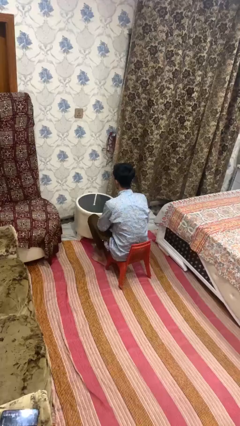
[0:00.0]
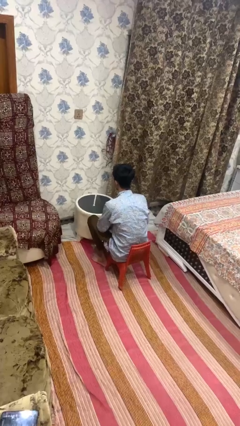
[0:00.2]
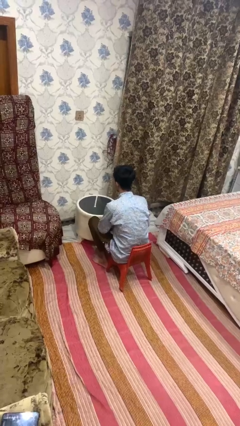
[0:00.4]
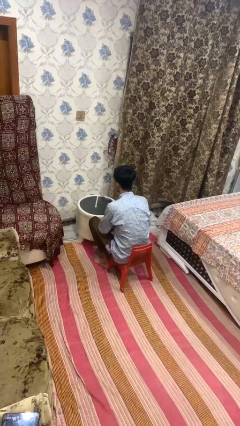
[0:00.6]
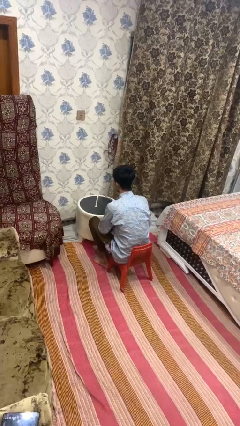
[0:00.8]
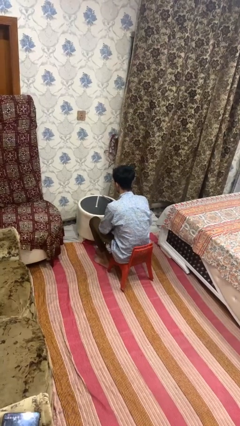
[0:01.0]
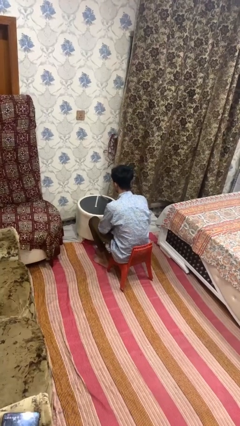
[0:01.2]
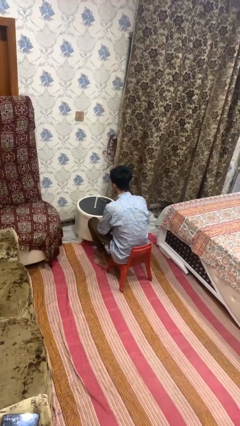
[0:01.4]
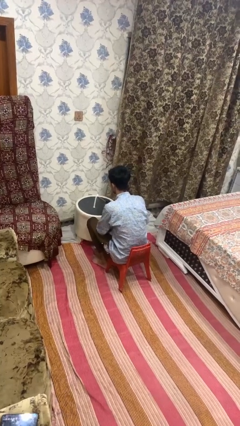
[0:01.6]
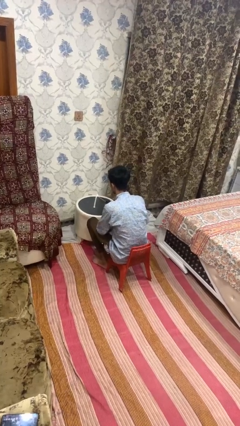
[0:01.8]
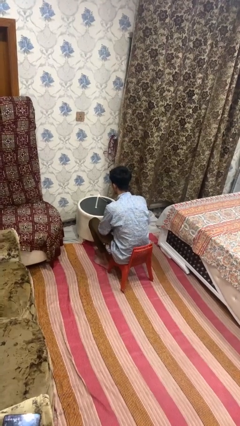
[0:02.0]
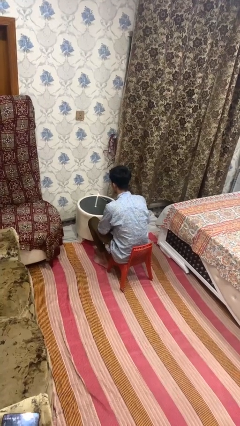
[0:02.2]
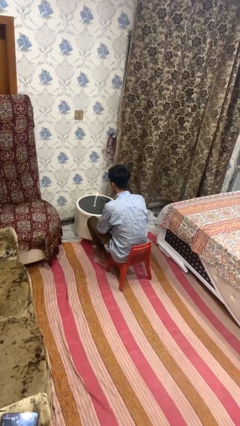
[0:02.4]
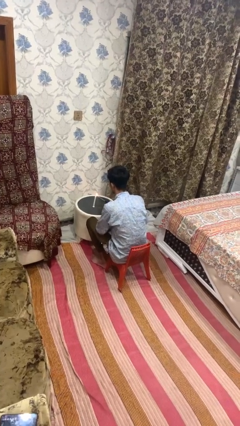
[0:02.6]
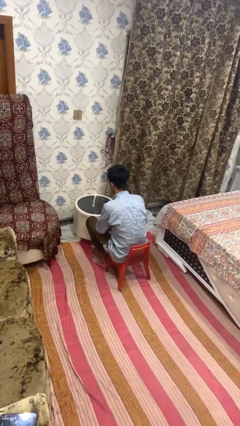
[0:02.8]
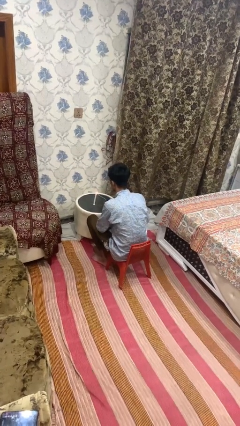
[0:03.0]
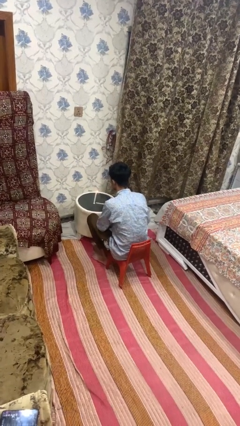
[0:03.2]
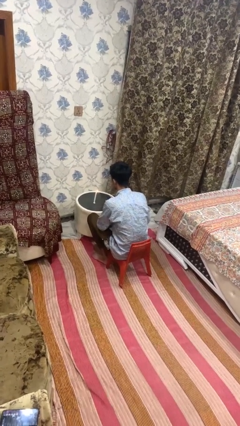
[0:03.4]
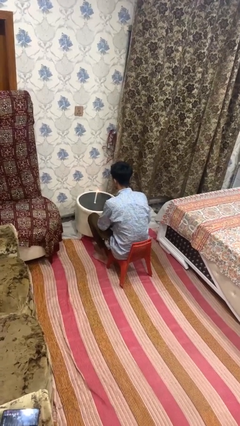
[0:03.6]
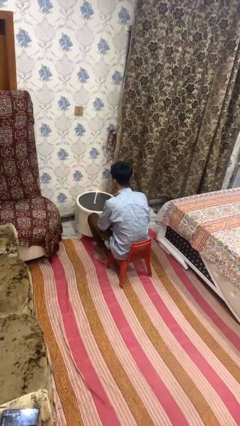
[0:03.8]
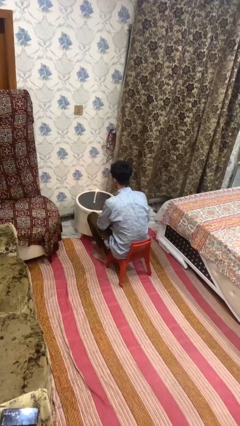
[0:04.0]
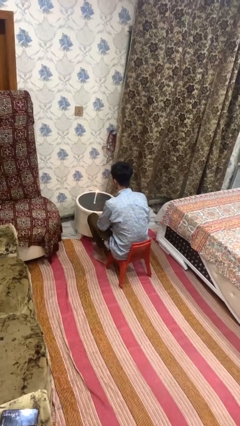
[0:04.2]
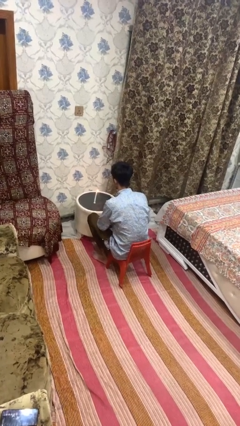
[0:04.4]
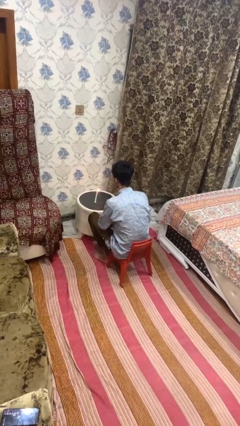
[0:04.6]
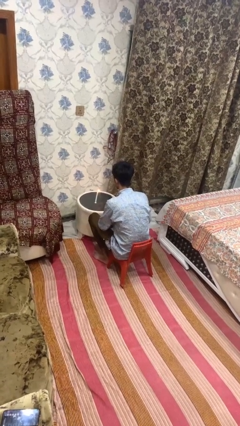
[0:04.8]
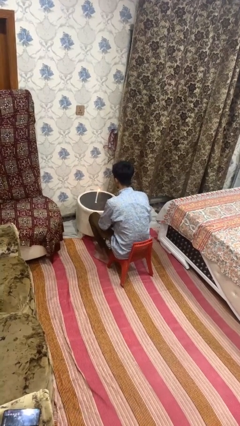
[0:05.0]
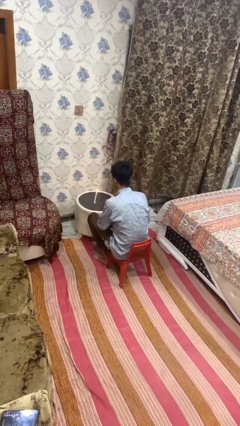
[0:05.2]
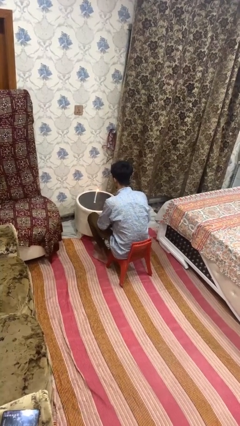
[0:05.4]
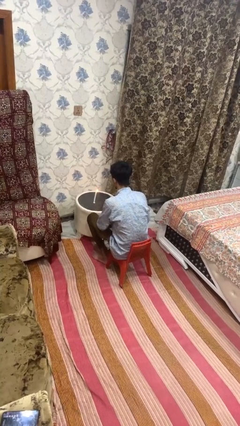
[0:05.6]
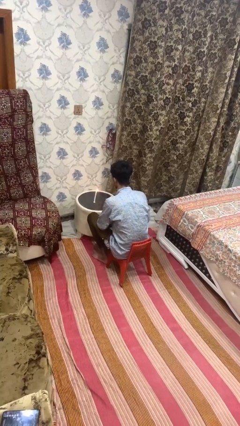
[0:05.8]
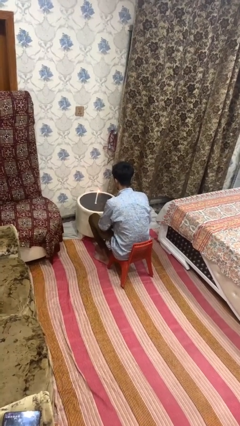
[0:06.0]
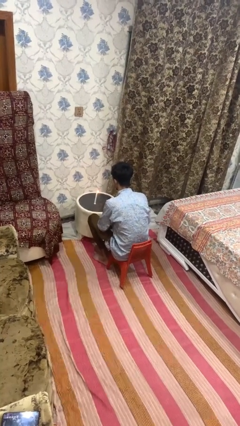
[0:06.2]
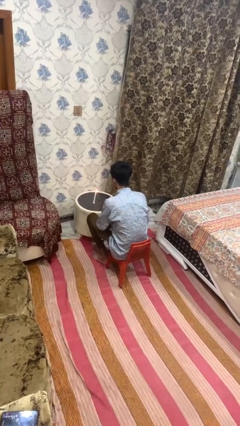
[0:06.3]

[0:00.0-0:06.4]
person lights candle

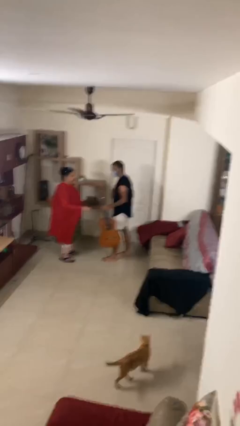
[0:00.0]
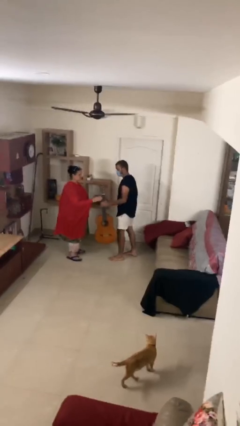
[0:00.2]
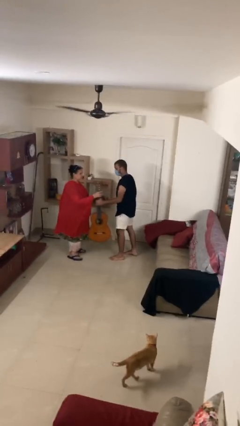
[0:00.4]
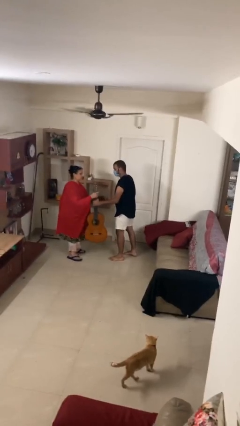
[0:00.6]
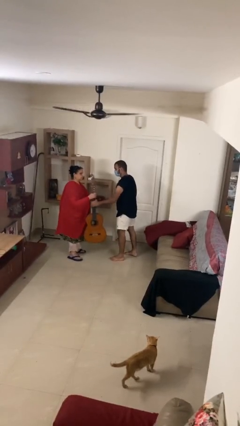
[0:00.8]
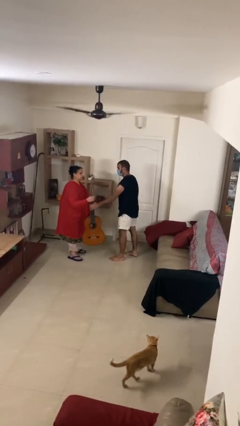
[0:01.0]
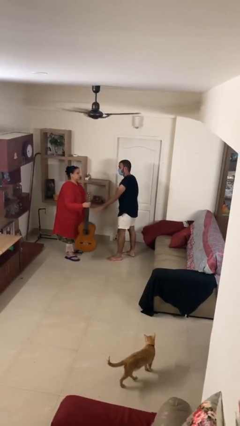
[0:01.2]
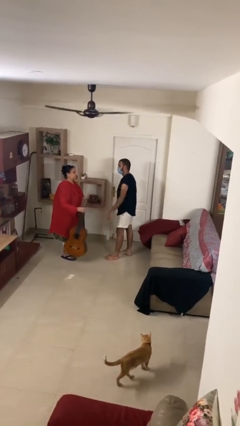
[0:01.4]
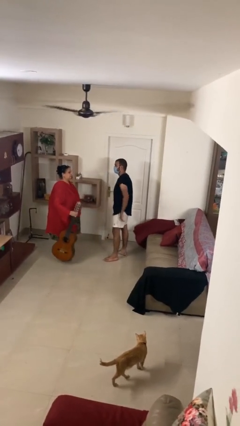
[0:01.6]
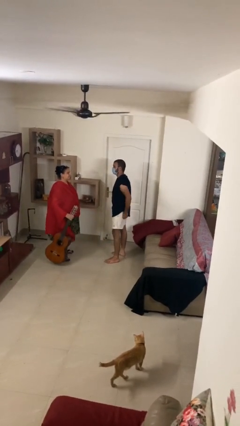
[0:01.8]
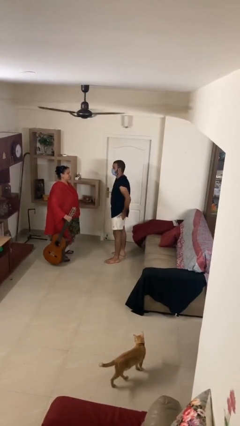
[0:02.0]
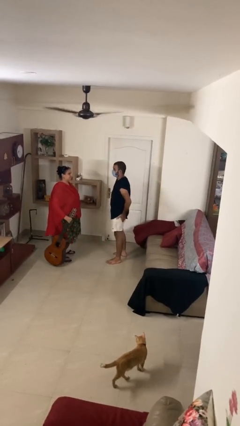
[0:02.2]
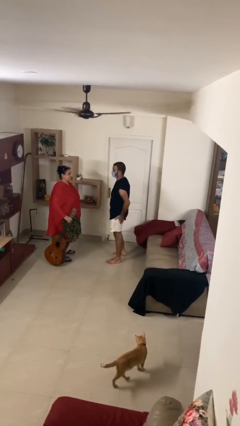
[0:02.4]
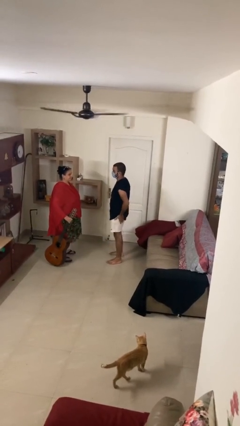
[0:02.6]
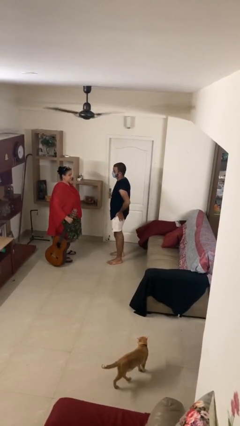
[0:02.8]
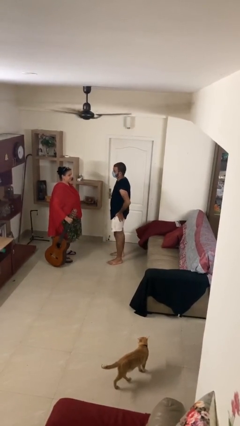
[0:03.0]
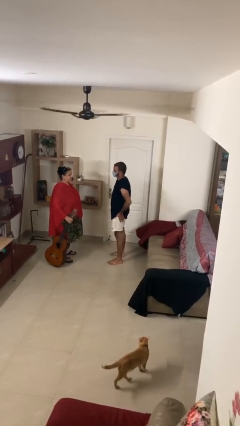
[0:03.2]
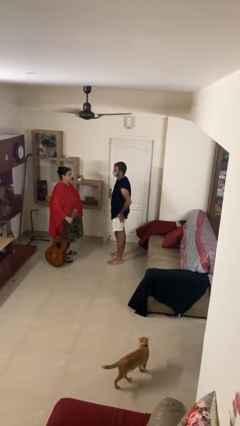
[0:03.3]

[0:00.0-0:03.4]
person transfers object to person

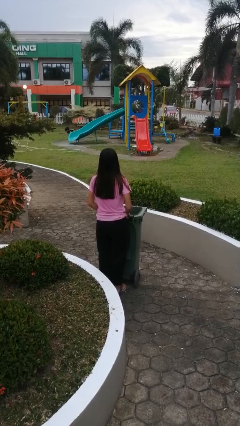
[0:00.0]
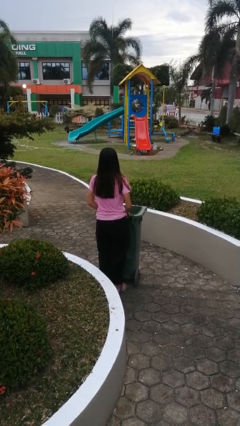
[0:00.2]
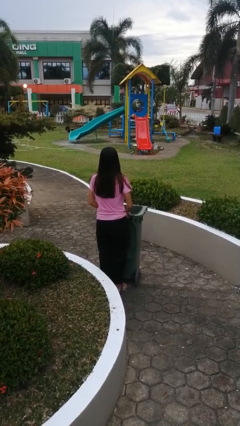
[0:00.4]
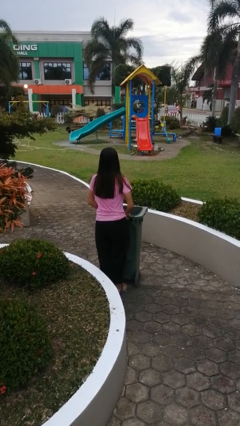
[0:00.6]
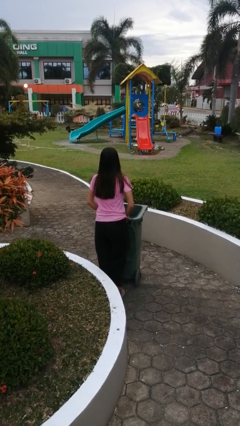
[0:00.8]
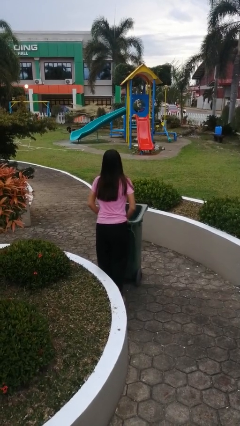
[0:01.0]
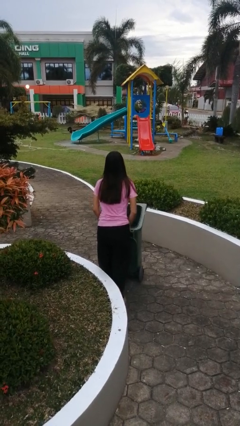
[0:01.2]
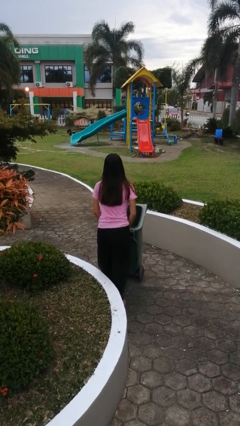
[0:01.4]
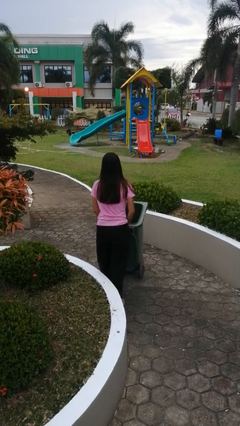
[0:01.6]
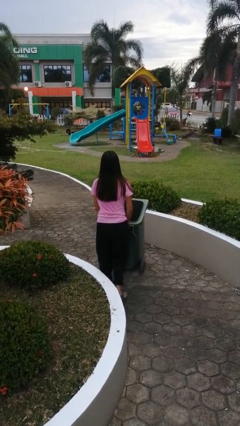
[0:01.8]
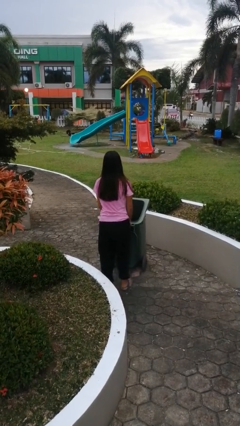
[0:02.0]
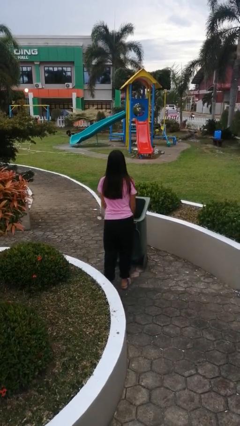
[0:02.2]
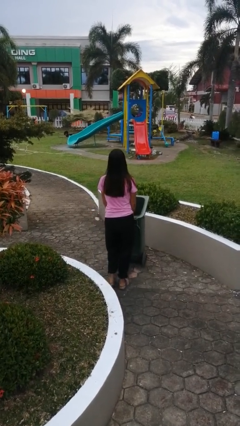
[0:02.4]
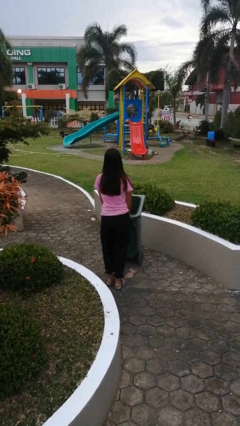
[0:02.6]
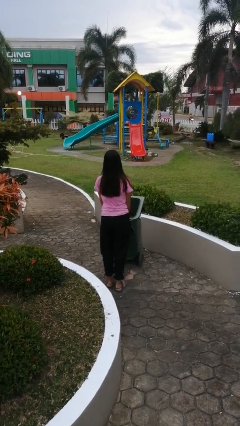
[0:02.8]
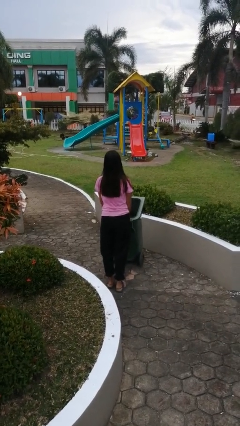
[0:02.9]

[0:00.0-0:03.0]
person pushes wheeled trashcan

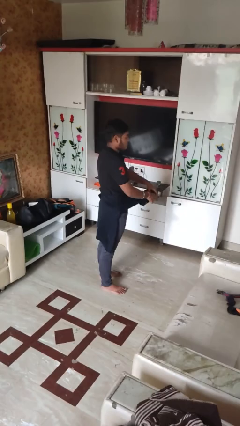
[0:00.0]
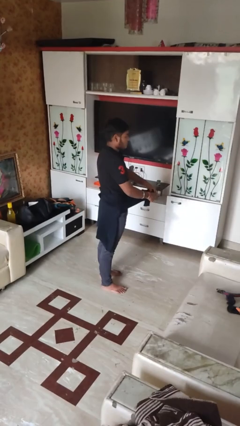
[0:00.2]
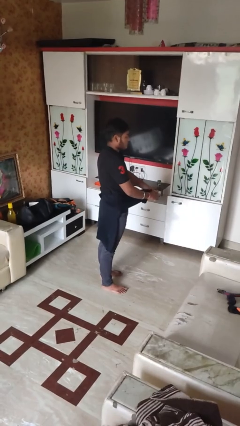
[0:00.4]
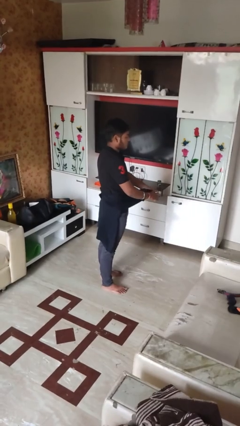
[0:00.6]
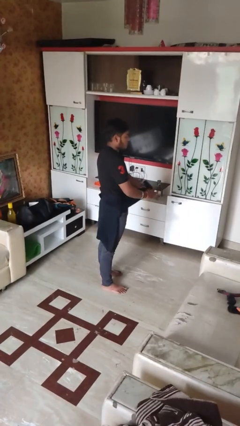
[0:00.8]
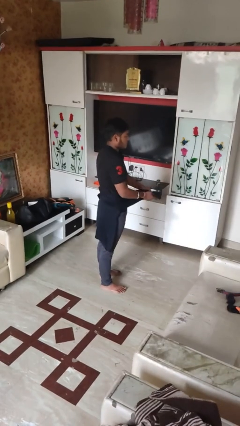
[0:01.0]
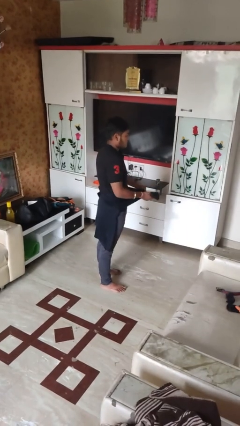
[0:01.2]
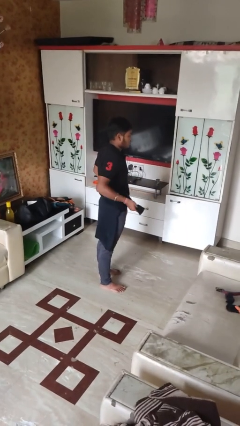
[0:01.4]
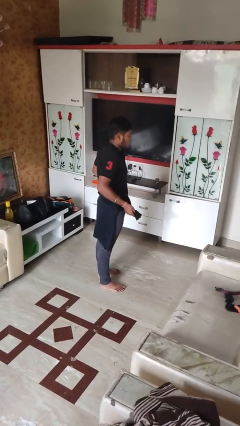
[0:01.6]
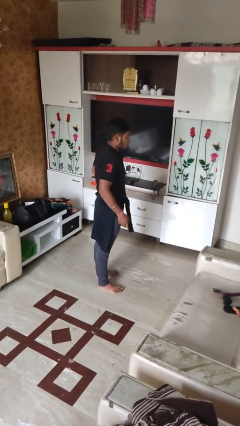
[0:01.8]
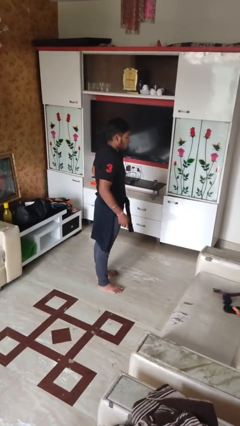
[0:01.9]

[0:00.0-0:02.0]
person ties jacket around waist

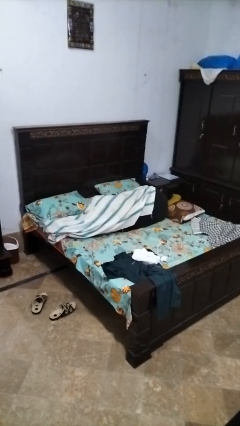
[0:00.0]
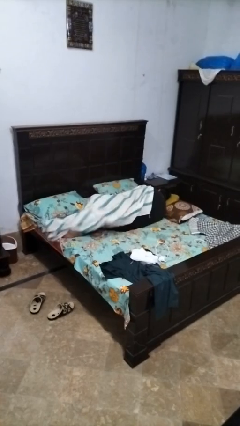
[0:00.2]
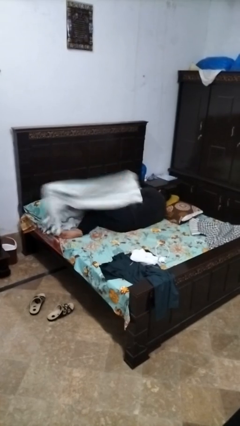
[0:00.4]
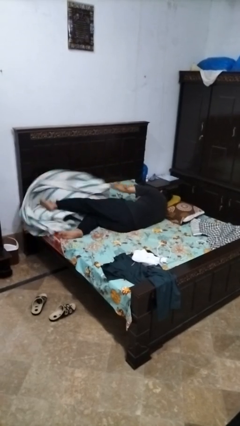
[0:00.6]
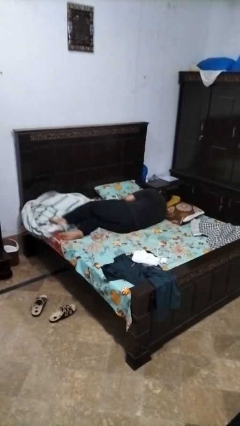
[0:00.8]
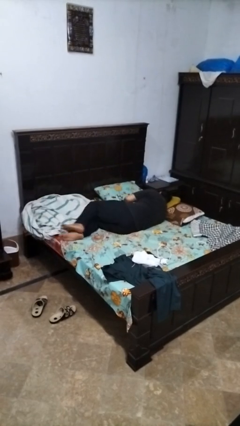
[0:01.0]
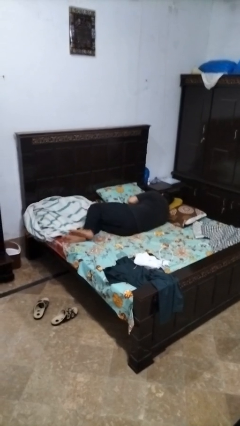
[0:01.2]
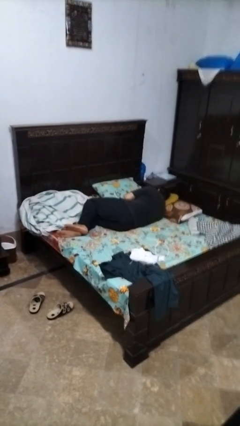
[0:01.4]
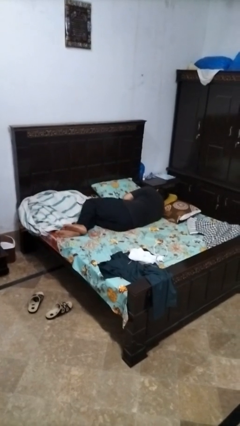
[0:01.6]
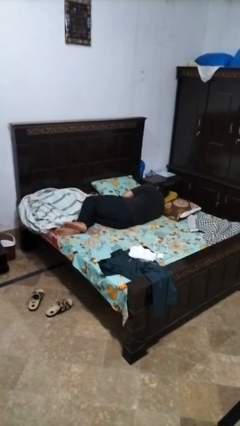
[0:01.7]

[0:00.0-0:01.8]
person uncovers with bedsheets

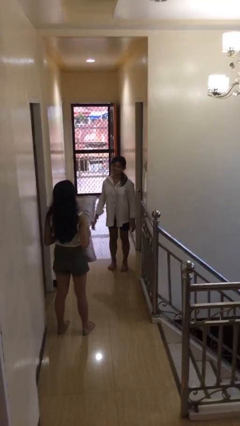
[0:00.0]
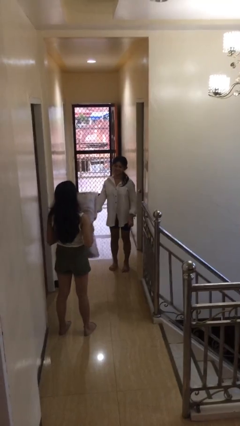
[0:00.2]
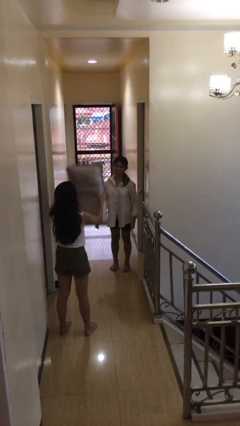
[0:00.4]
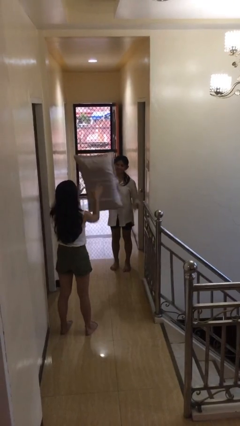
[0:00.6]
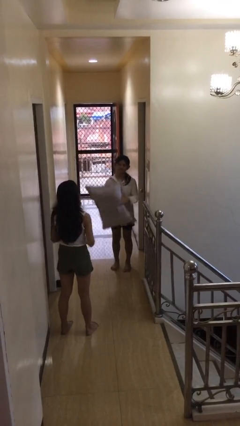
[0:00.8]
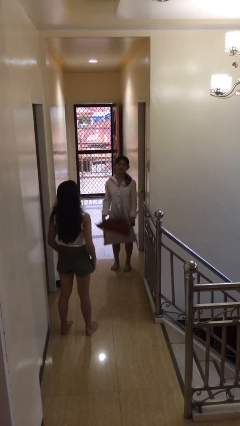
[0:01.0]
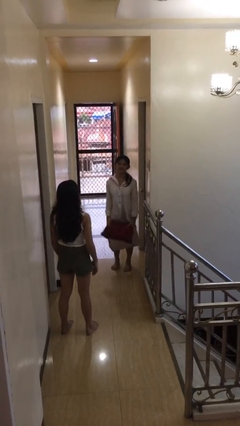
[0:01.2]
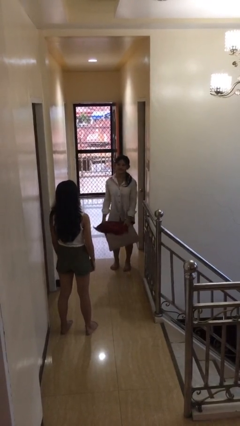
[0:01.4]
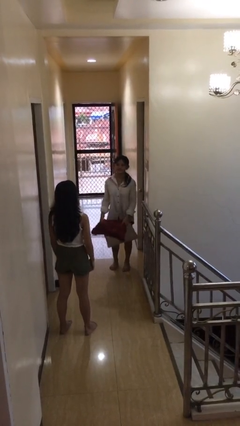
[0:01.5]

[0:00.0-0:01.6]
person catches object from person
